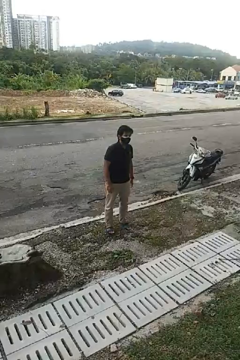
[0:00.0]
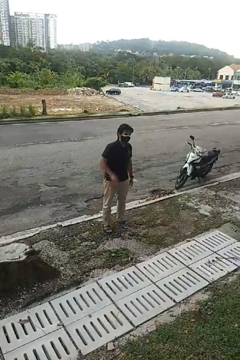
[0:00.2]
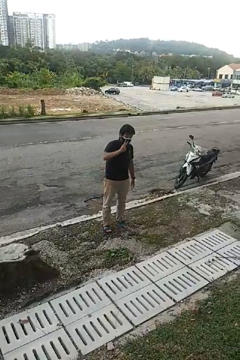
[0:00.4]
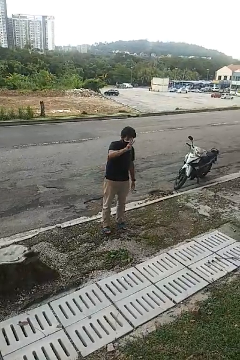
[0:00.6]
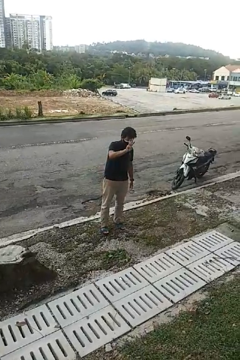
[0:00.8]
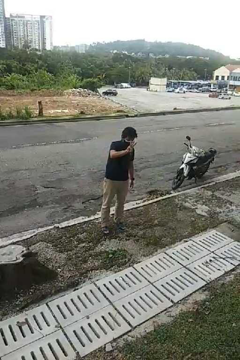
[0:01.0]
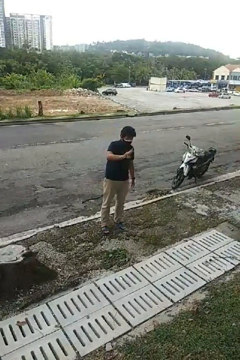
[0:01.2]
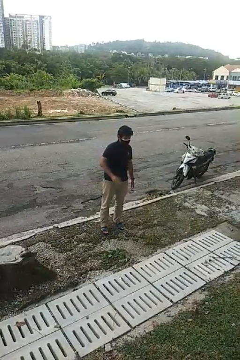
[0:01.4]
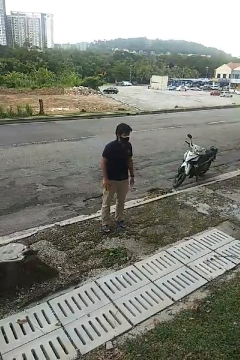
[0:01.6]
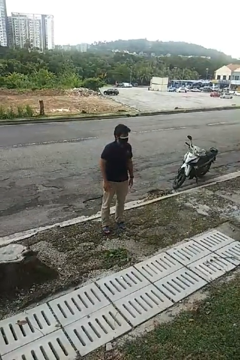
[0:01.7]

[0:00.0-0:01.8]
person gestures number three

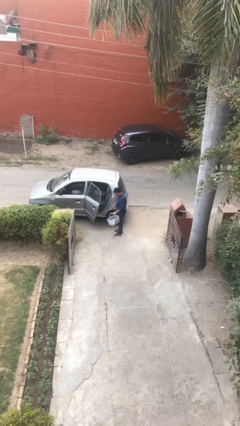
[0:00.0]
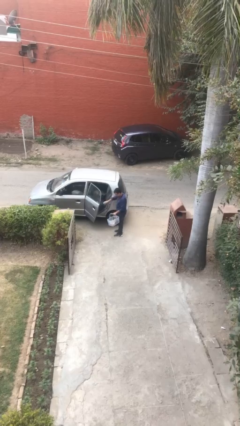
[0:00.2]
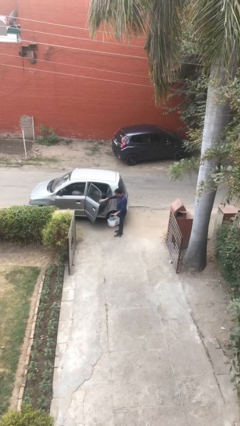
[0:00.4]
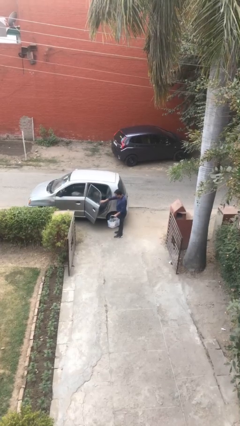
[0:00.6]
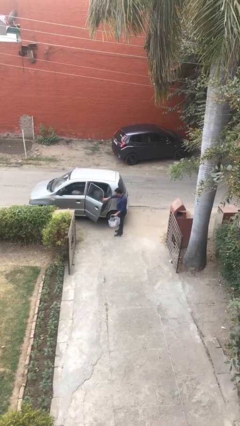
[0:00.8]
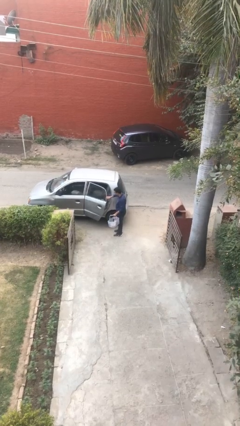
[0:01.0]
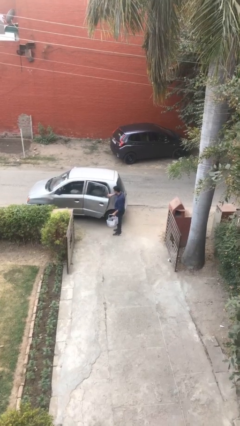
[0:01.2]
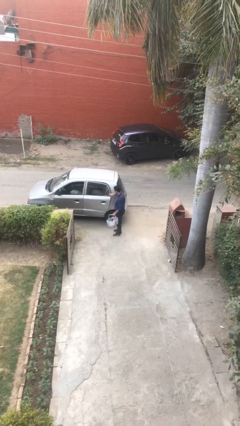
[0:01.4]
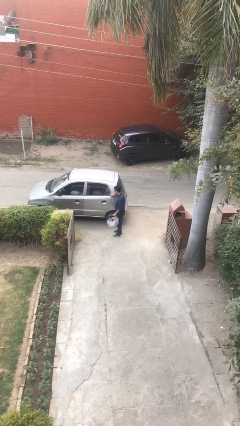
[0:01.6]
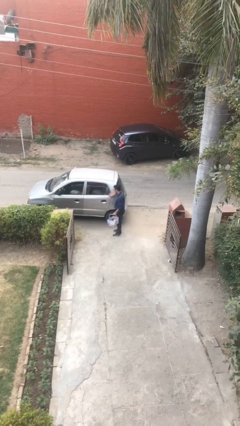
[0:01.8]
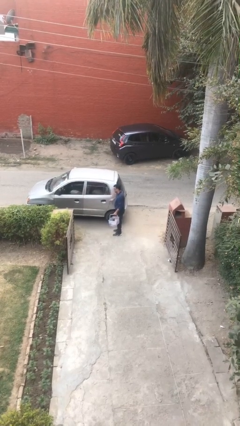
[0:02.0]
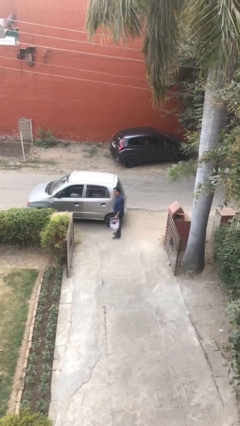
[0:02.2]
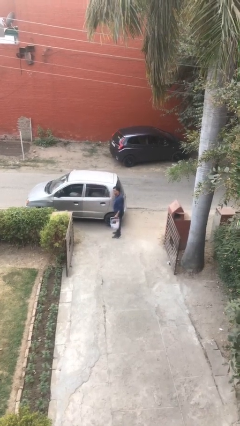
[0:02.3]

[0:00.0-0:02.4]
person closes car door

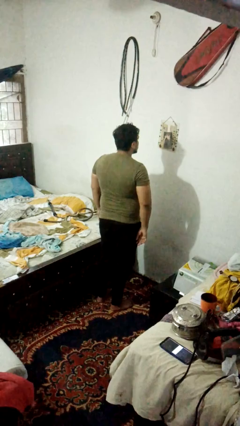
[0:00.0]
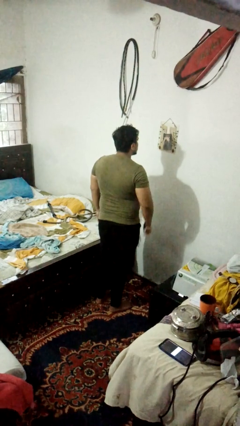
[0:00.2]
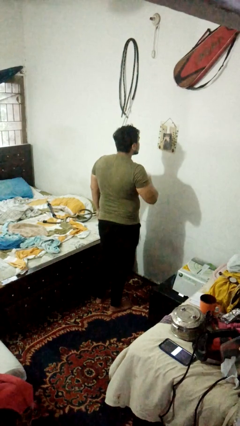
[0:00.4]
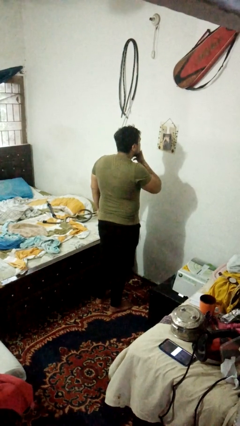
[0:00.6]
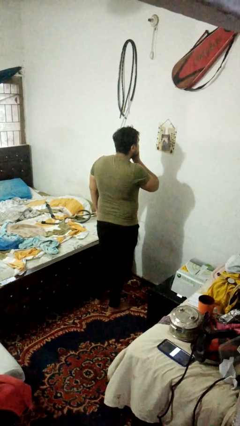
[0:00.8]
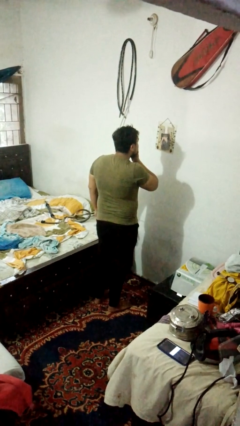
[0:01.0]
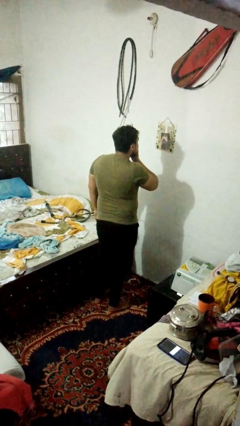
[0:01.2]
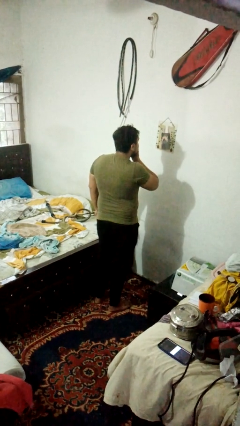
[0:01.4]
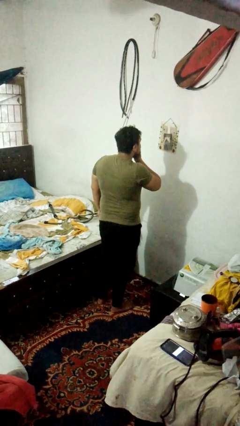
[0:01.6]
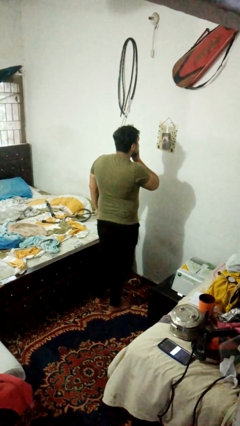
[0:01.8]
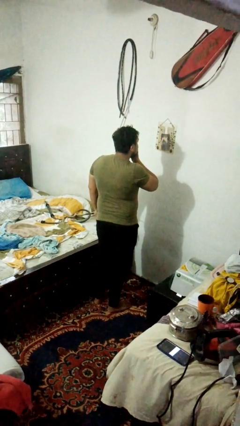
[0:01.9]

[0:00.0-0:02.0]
person strokes chin

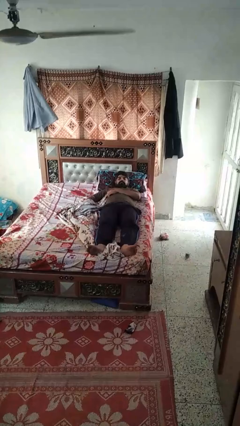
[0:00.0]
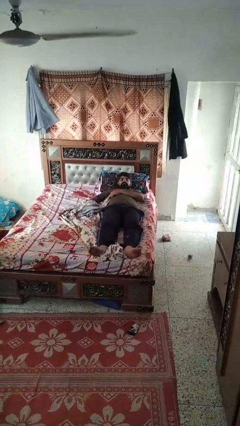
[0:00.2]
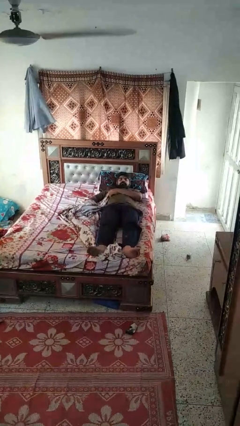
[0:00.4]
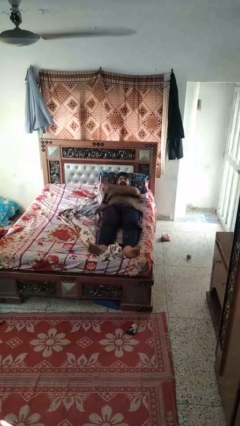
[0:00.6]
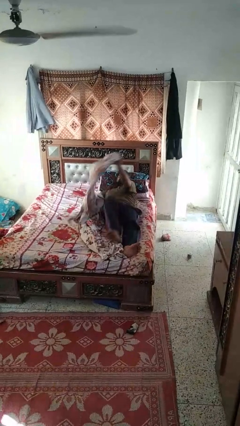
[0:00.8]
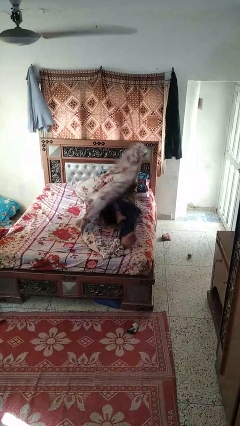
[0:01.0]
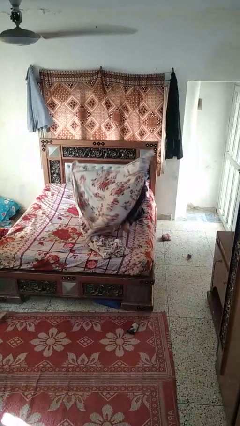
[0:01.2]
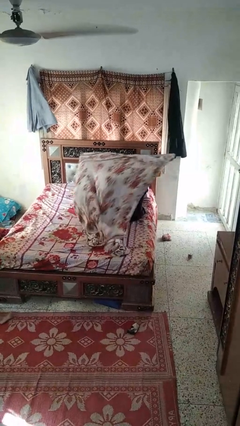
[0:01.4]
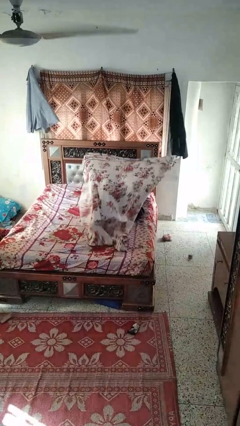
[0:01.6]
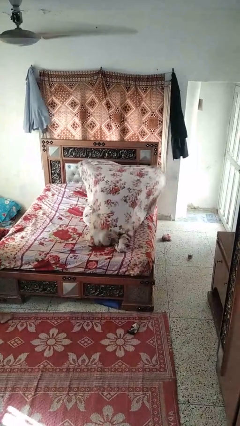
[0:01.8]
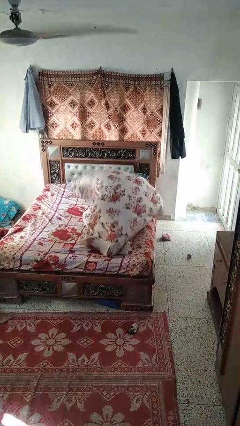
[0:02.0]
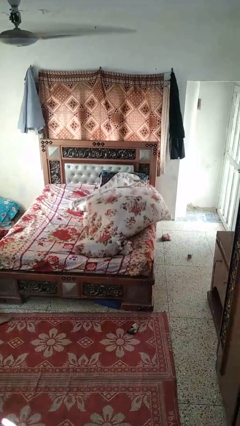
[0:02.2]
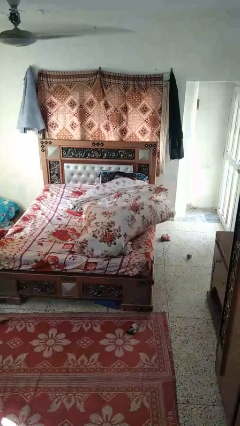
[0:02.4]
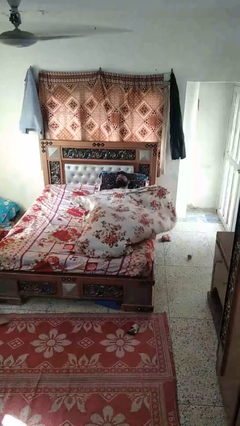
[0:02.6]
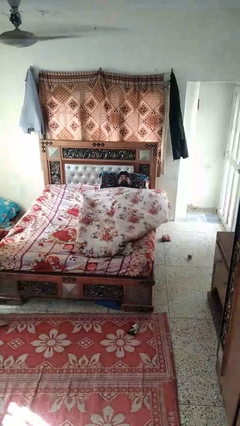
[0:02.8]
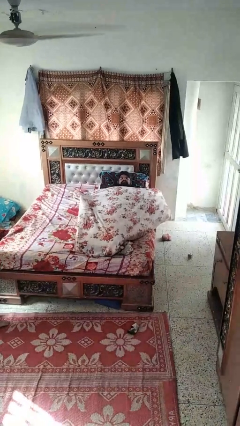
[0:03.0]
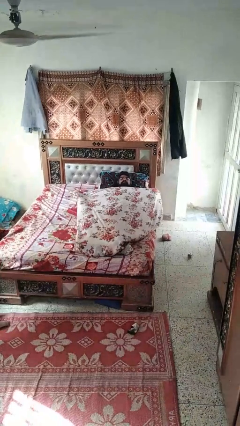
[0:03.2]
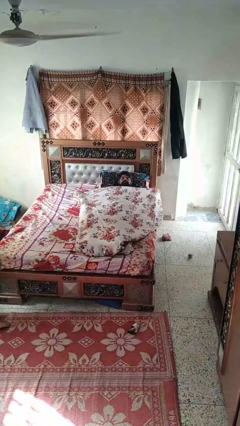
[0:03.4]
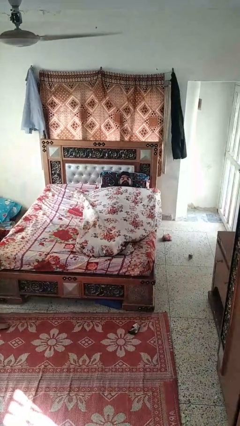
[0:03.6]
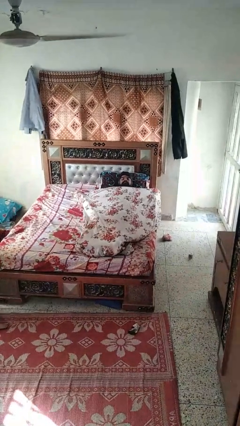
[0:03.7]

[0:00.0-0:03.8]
person covers with bedsheets

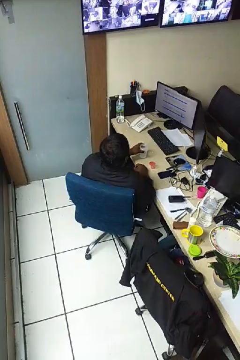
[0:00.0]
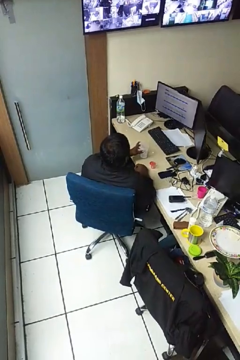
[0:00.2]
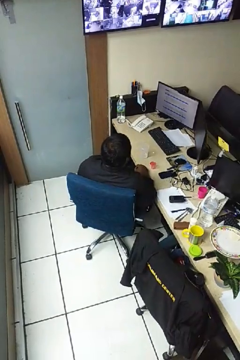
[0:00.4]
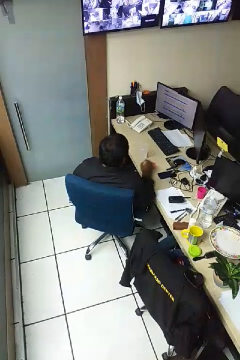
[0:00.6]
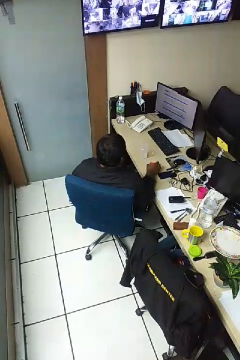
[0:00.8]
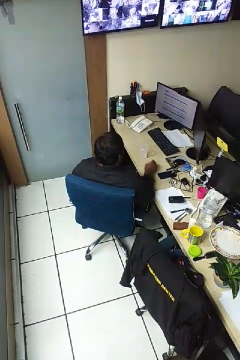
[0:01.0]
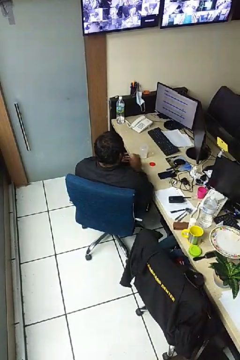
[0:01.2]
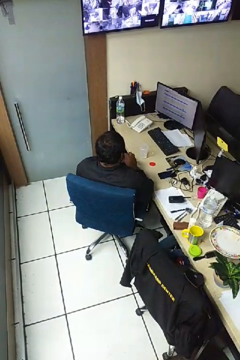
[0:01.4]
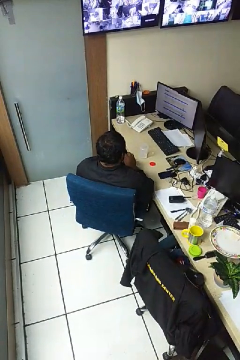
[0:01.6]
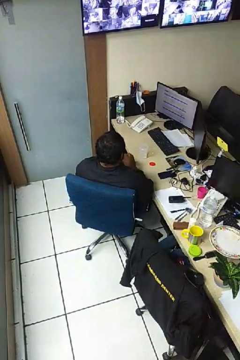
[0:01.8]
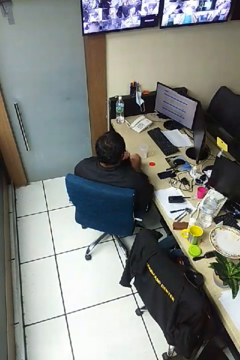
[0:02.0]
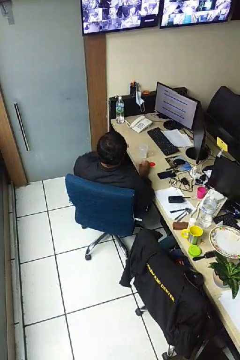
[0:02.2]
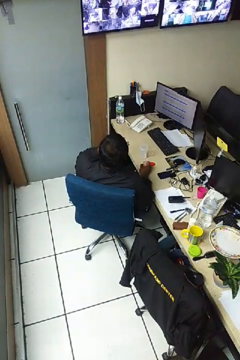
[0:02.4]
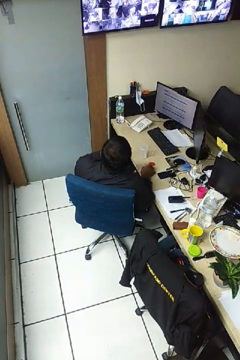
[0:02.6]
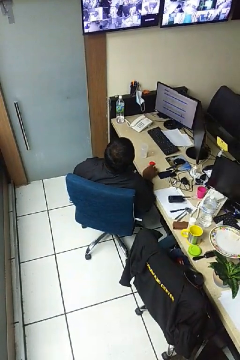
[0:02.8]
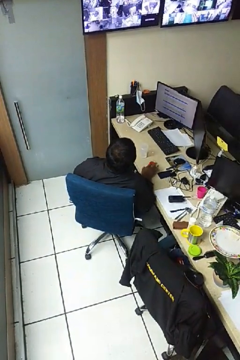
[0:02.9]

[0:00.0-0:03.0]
person takes medicine pills

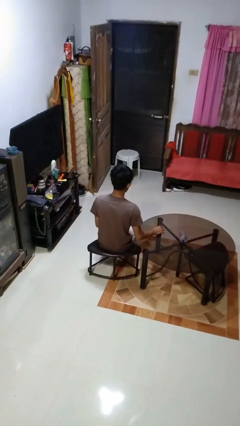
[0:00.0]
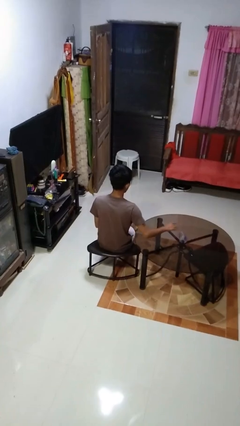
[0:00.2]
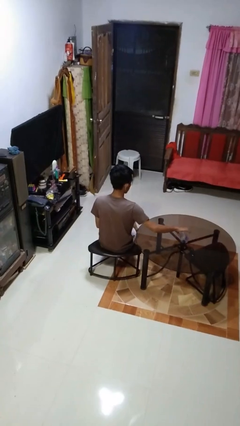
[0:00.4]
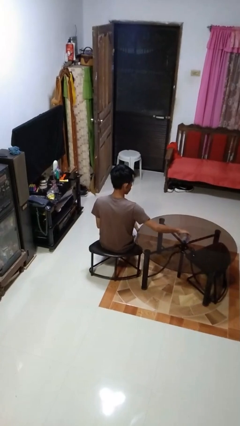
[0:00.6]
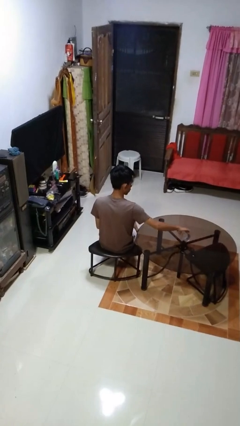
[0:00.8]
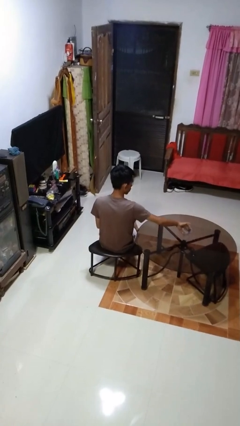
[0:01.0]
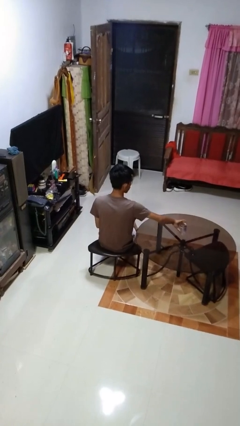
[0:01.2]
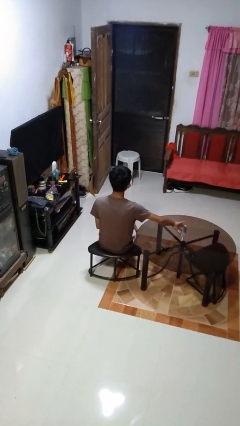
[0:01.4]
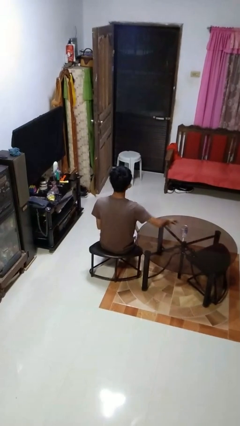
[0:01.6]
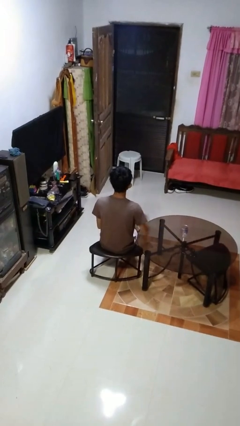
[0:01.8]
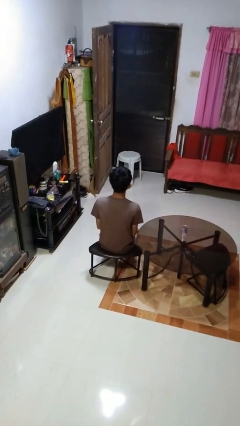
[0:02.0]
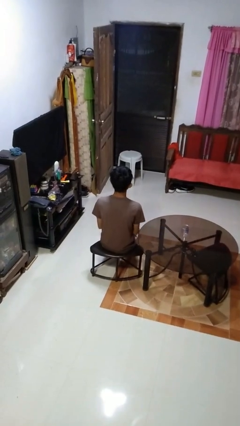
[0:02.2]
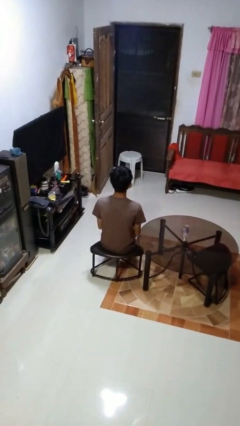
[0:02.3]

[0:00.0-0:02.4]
person sets upright glass

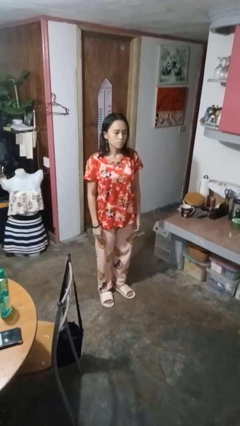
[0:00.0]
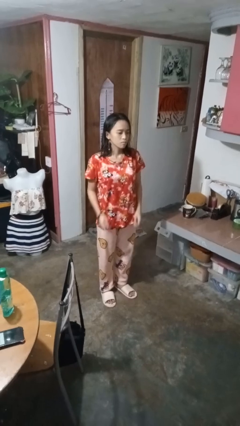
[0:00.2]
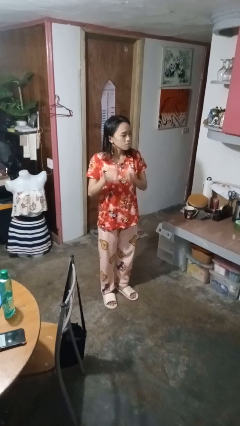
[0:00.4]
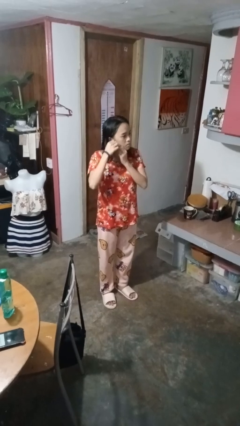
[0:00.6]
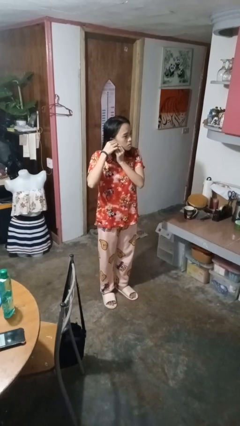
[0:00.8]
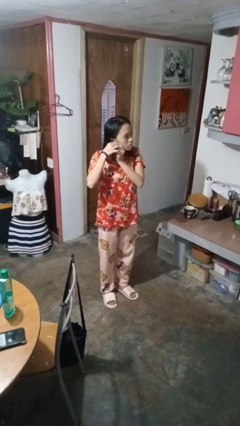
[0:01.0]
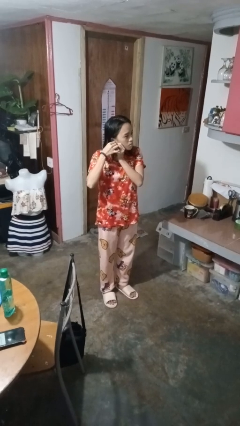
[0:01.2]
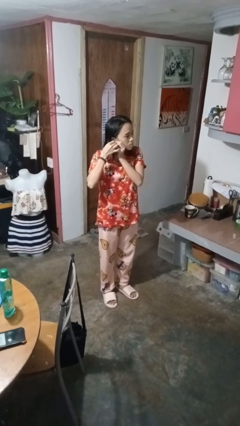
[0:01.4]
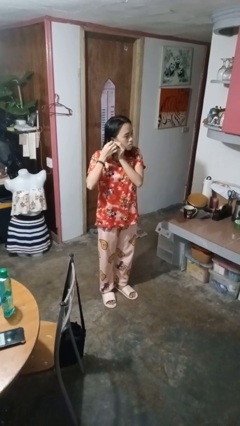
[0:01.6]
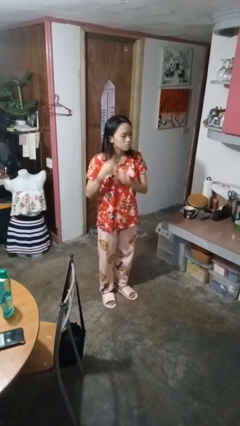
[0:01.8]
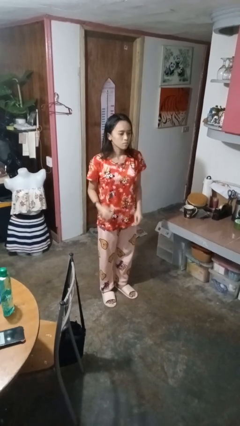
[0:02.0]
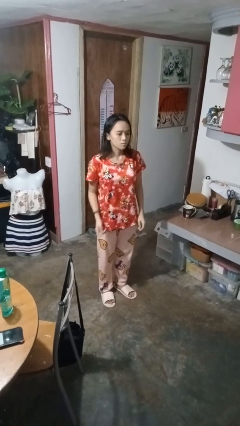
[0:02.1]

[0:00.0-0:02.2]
person takes off earrings
